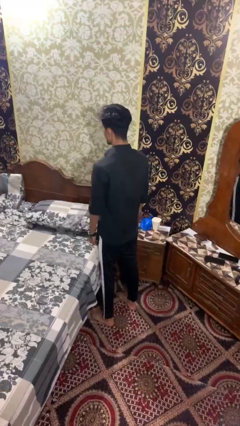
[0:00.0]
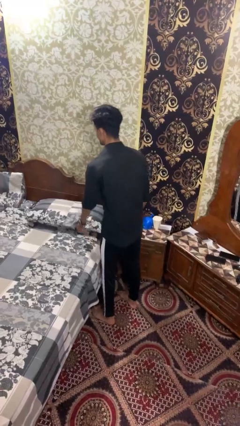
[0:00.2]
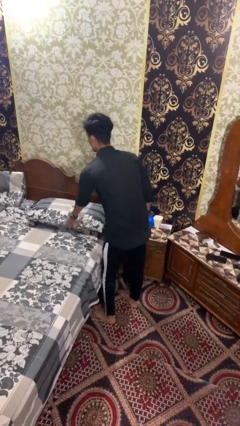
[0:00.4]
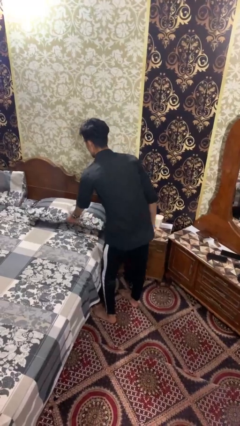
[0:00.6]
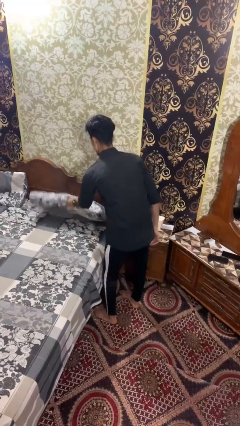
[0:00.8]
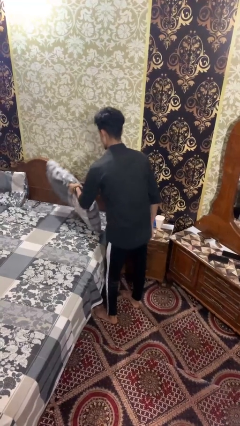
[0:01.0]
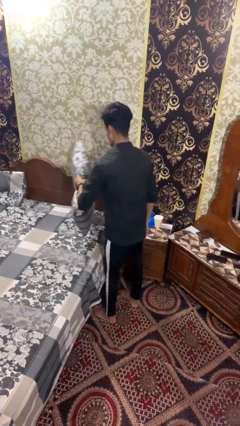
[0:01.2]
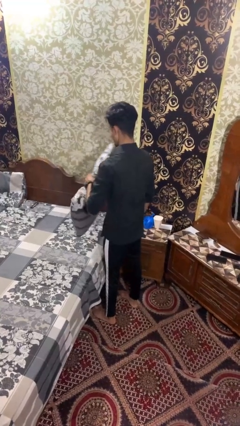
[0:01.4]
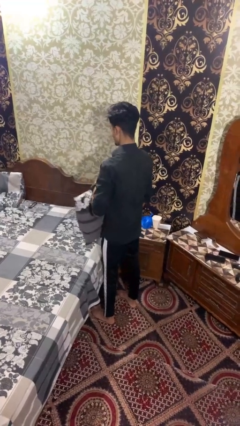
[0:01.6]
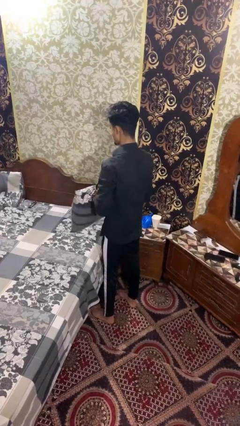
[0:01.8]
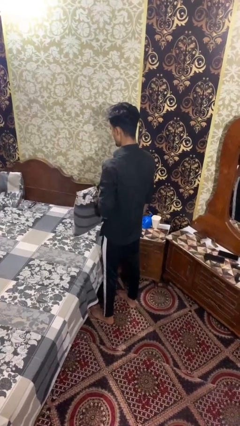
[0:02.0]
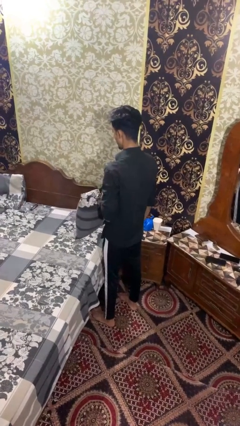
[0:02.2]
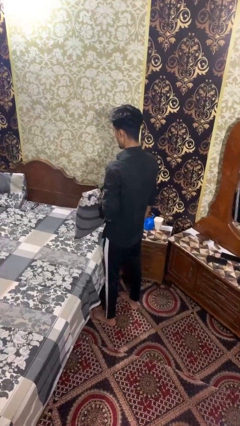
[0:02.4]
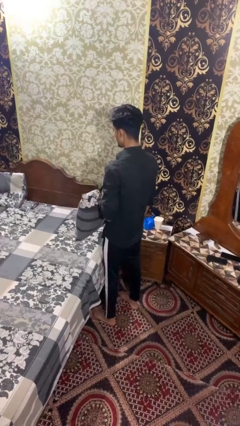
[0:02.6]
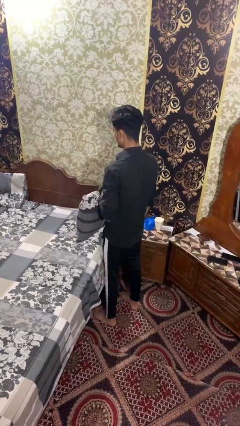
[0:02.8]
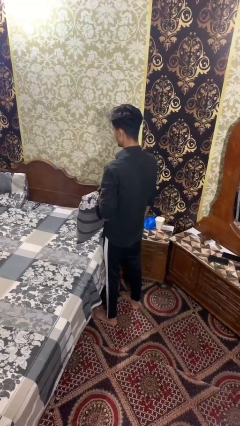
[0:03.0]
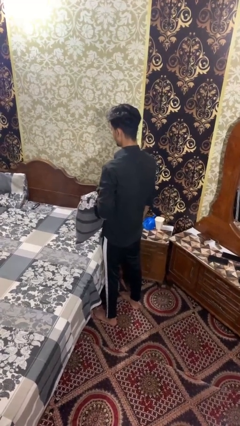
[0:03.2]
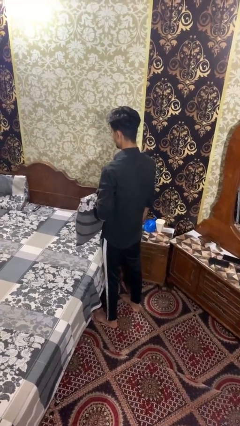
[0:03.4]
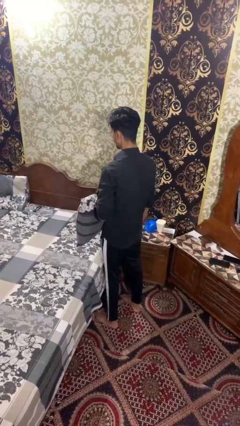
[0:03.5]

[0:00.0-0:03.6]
person picks up object from bed

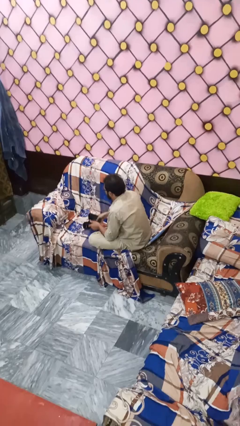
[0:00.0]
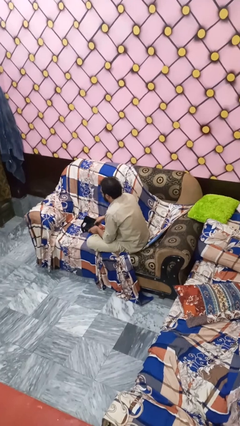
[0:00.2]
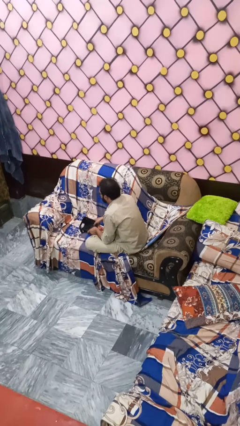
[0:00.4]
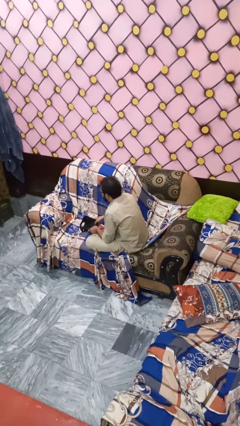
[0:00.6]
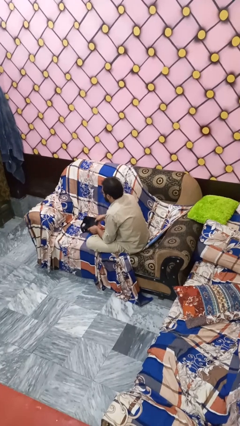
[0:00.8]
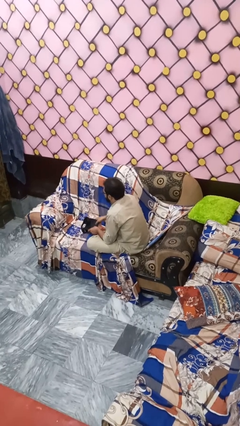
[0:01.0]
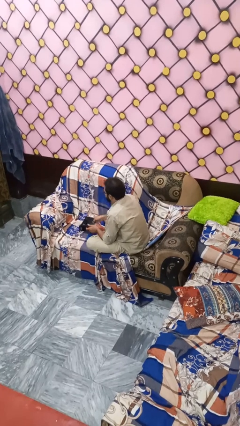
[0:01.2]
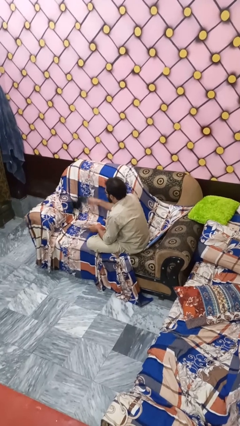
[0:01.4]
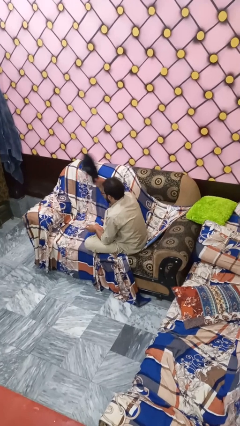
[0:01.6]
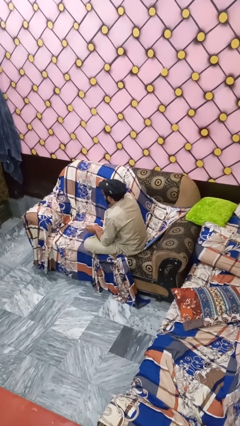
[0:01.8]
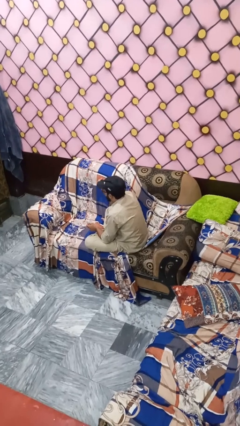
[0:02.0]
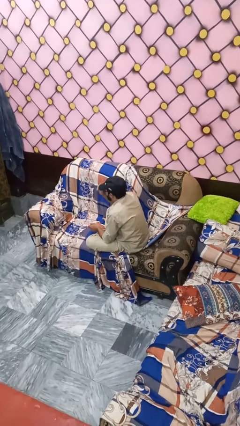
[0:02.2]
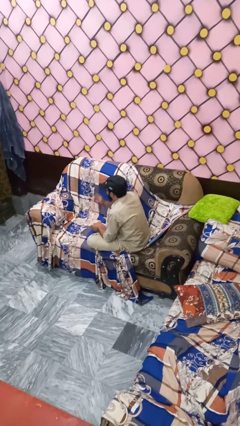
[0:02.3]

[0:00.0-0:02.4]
person holds object above head

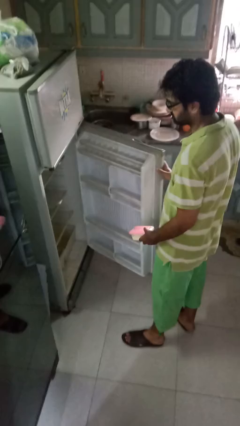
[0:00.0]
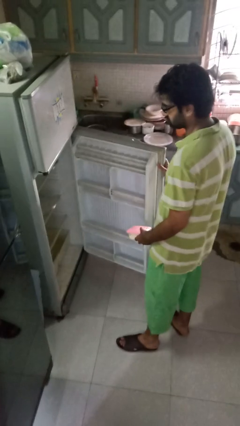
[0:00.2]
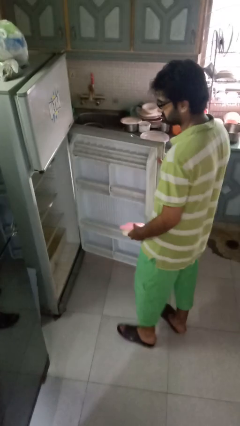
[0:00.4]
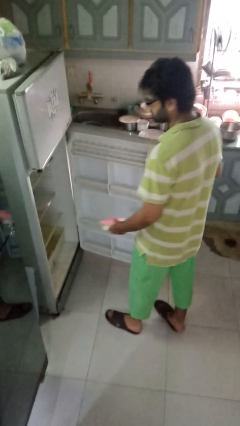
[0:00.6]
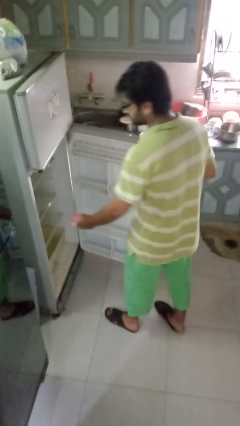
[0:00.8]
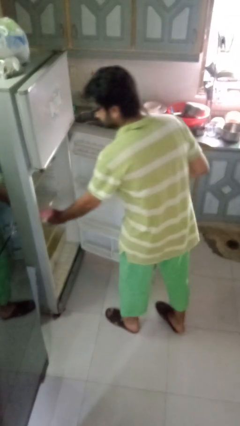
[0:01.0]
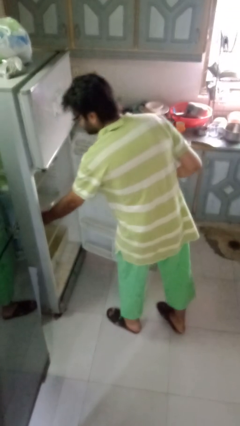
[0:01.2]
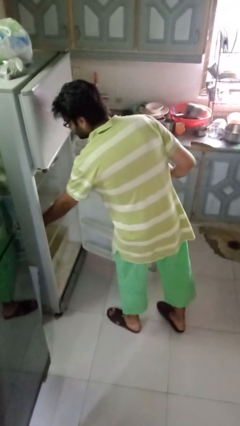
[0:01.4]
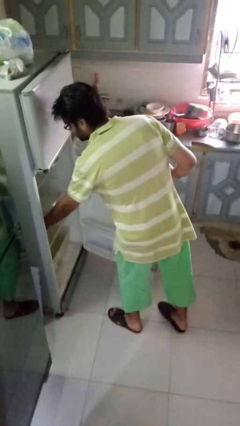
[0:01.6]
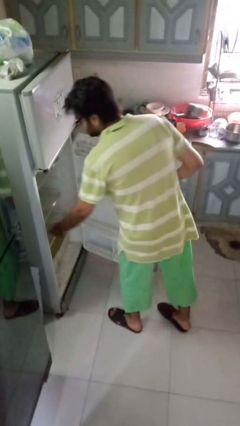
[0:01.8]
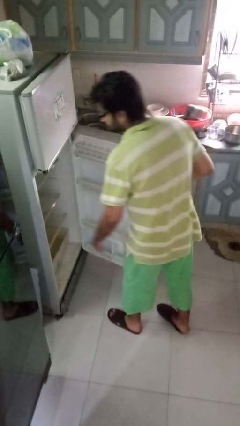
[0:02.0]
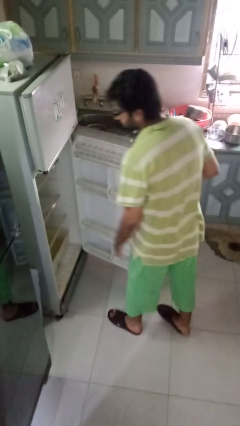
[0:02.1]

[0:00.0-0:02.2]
person puts object into refrigerator

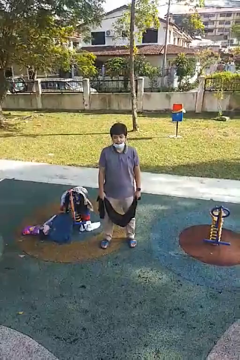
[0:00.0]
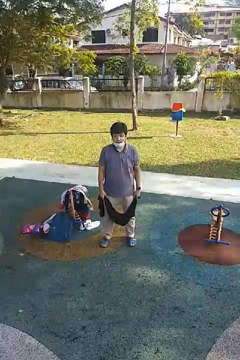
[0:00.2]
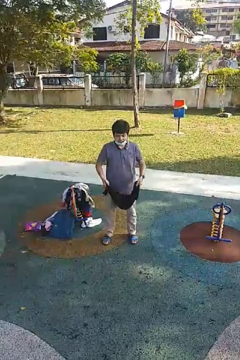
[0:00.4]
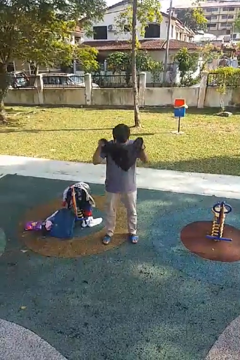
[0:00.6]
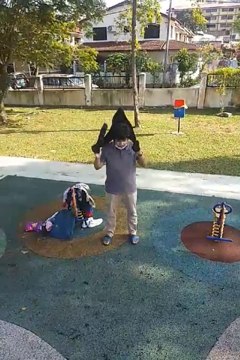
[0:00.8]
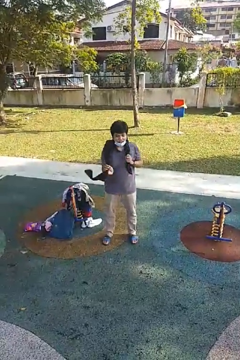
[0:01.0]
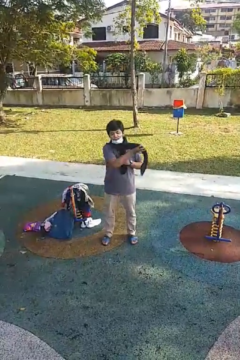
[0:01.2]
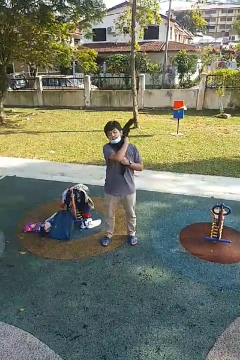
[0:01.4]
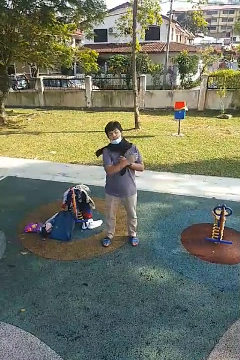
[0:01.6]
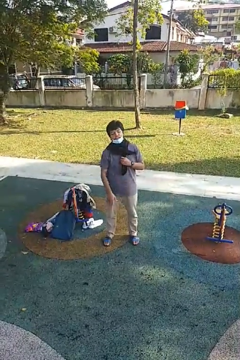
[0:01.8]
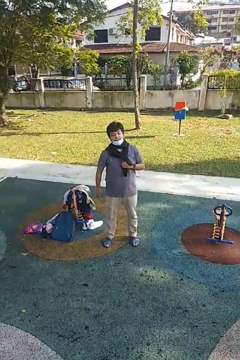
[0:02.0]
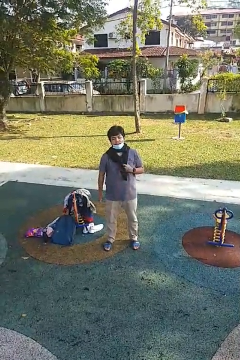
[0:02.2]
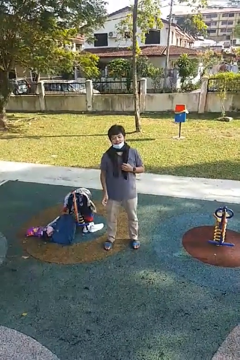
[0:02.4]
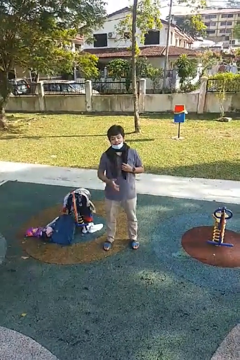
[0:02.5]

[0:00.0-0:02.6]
person puts on scarf

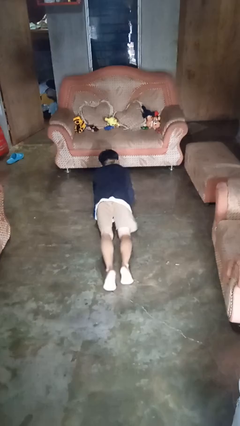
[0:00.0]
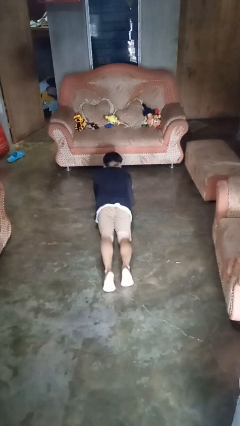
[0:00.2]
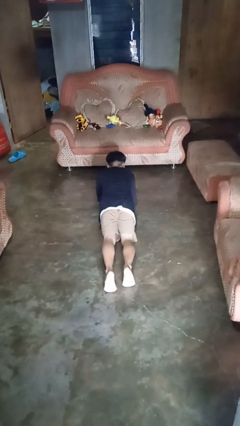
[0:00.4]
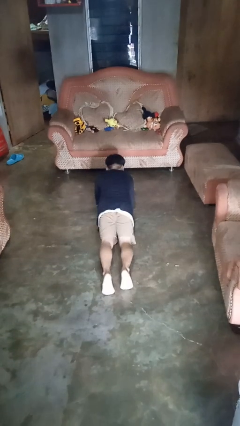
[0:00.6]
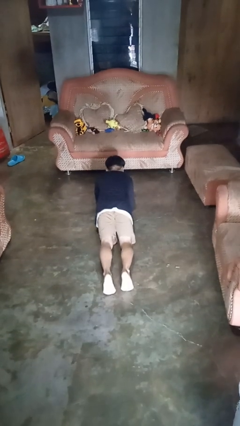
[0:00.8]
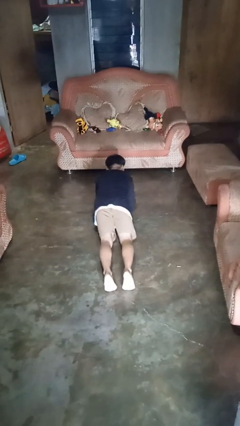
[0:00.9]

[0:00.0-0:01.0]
person exercises with plank

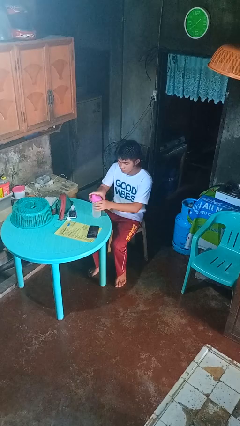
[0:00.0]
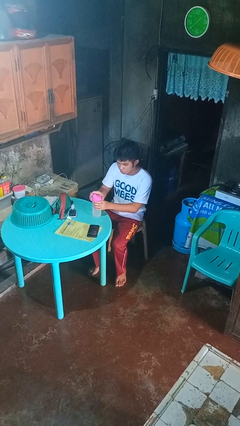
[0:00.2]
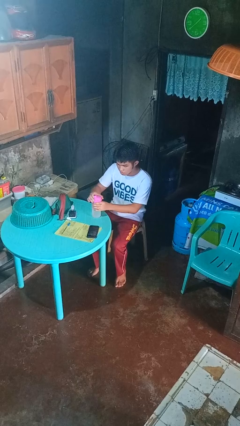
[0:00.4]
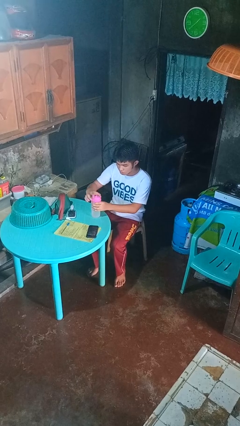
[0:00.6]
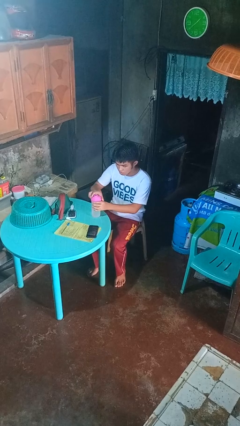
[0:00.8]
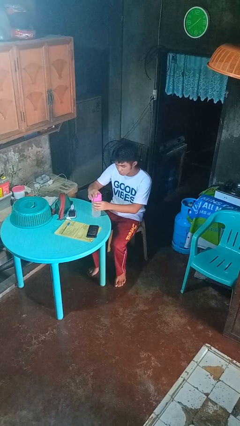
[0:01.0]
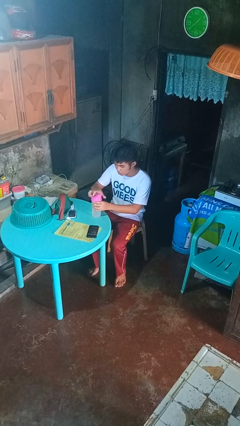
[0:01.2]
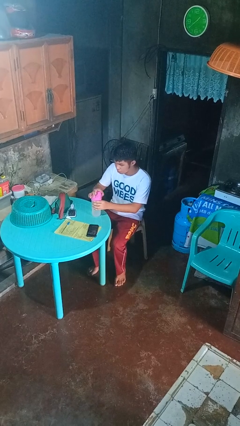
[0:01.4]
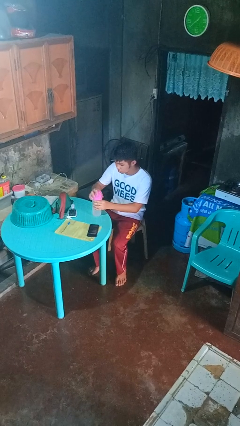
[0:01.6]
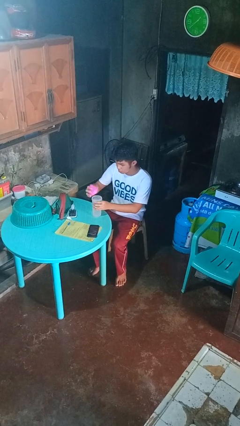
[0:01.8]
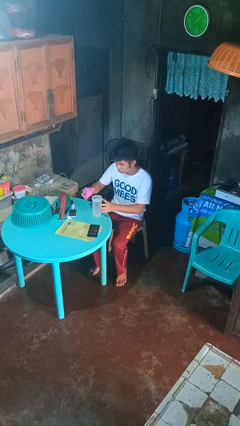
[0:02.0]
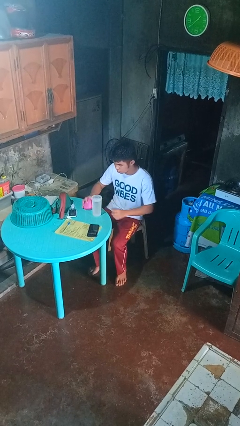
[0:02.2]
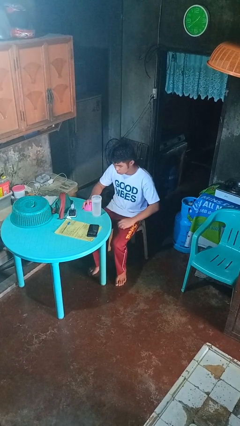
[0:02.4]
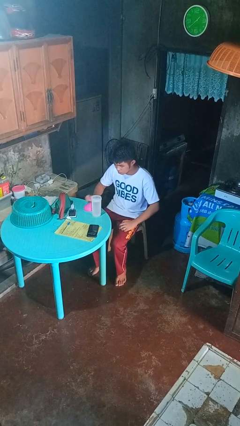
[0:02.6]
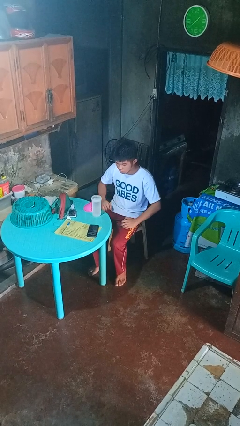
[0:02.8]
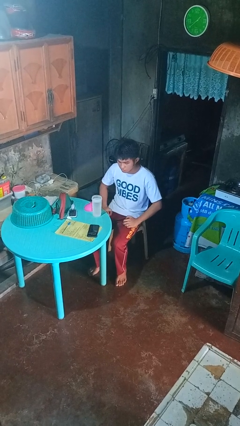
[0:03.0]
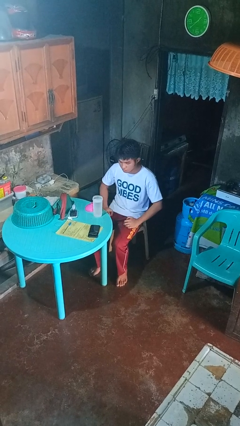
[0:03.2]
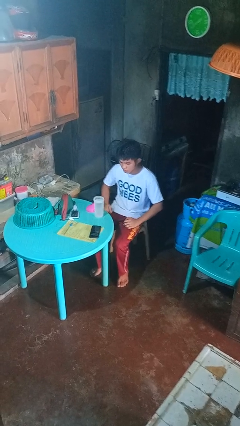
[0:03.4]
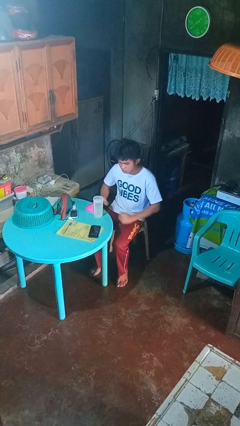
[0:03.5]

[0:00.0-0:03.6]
person unscrews lid from bottle

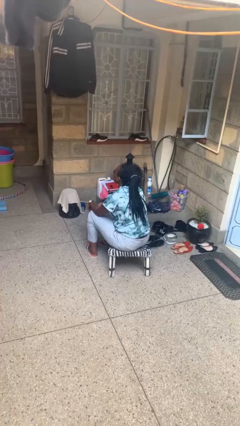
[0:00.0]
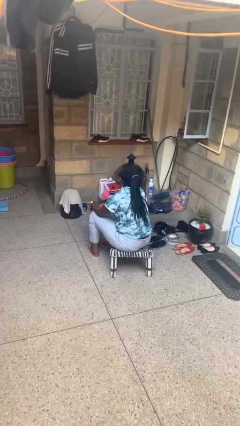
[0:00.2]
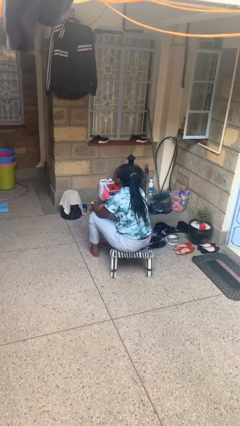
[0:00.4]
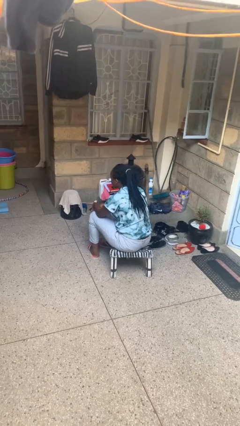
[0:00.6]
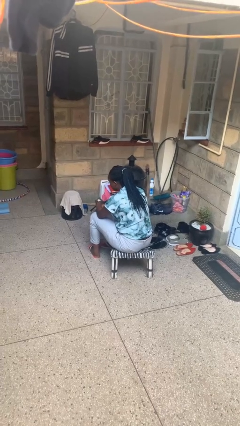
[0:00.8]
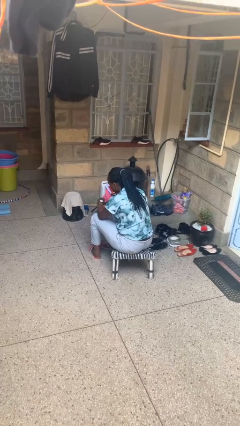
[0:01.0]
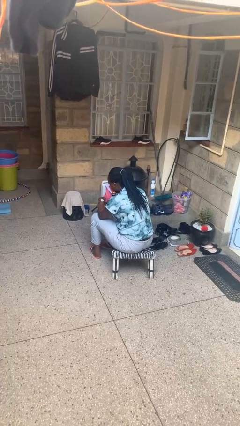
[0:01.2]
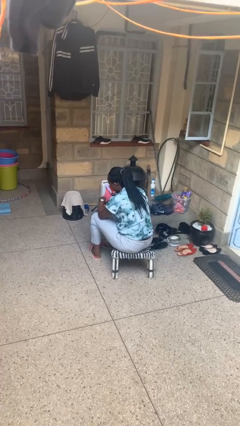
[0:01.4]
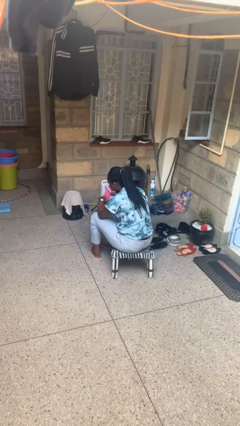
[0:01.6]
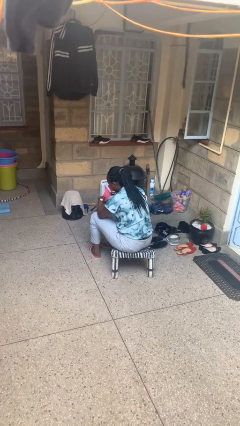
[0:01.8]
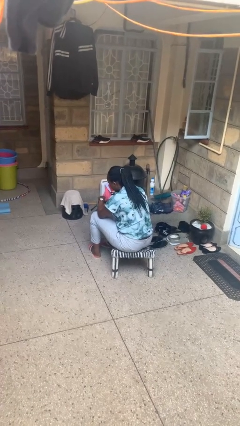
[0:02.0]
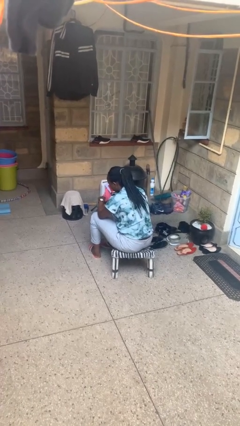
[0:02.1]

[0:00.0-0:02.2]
person looks at wristwatch

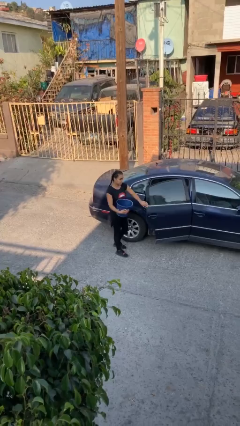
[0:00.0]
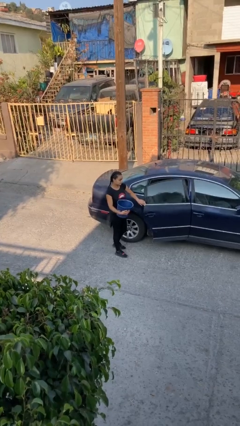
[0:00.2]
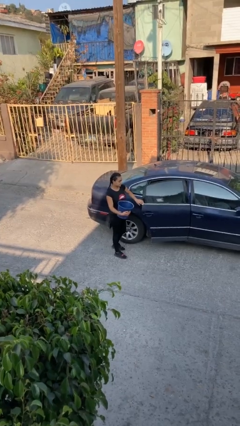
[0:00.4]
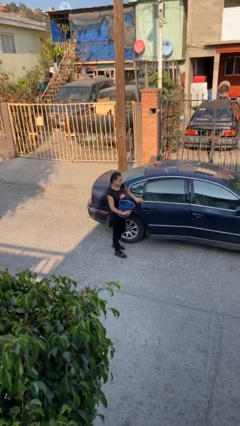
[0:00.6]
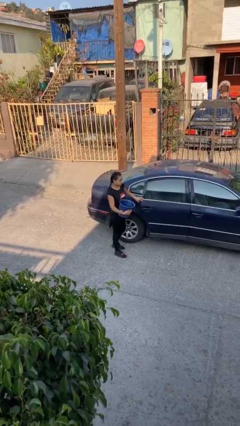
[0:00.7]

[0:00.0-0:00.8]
person closes car door
